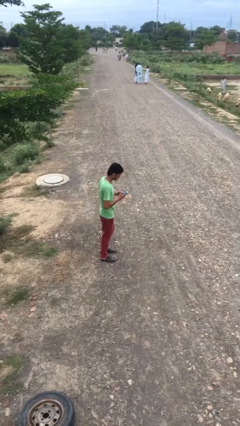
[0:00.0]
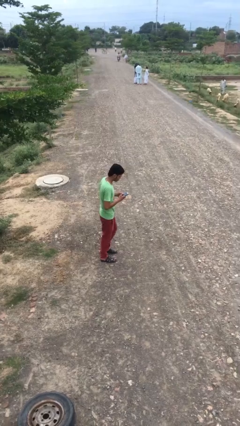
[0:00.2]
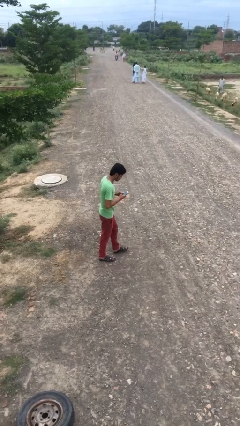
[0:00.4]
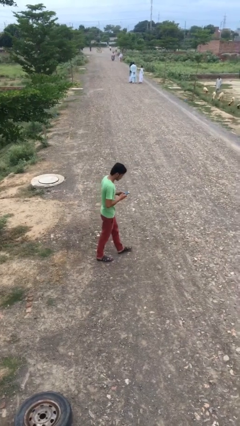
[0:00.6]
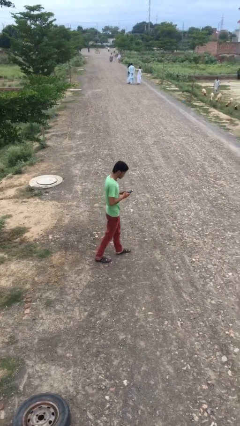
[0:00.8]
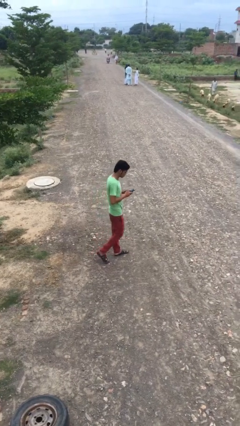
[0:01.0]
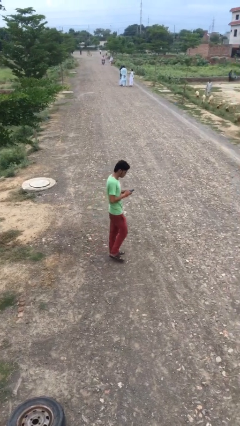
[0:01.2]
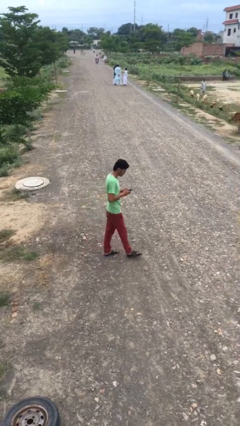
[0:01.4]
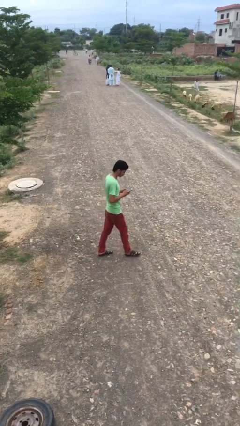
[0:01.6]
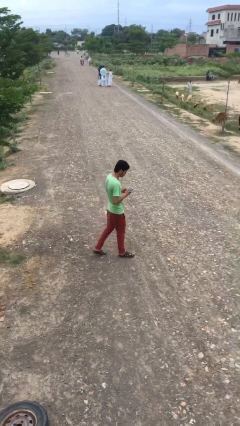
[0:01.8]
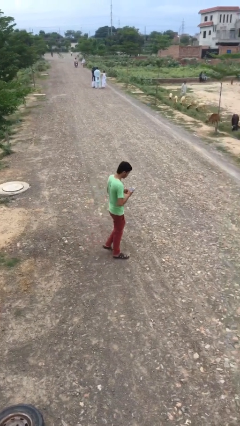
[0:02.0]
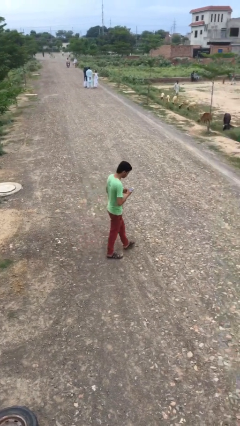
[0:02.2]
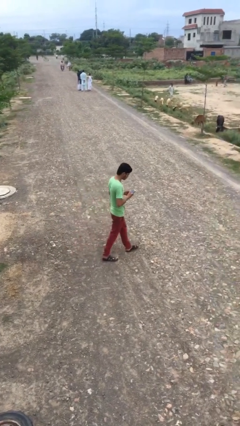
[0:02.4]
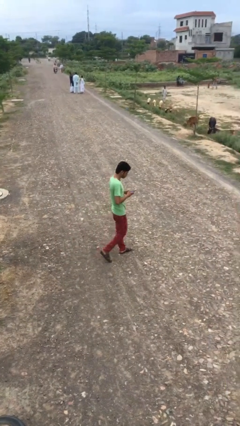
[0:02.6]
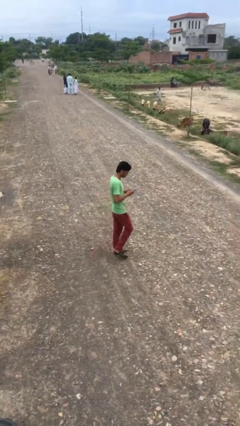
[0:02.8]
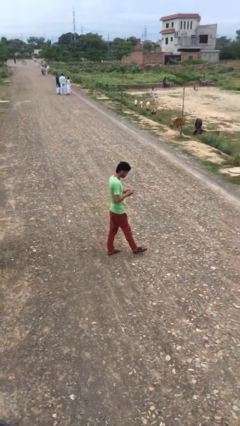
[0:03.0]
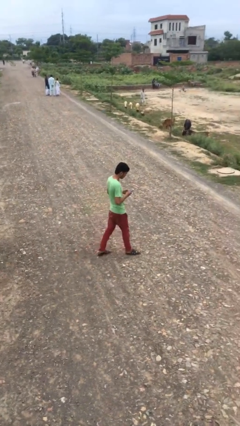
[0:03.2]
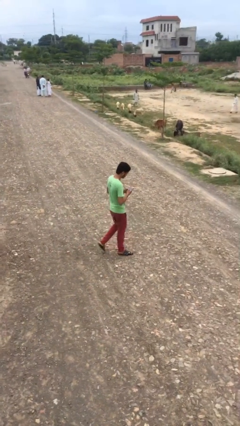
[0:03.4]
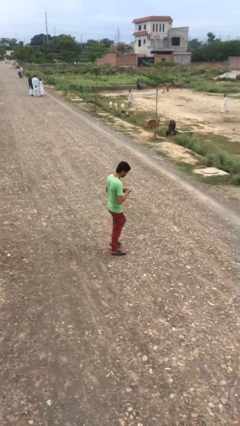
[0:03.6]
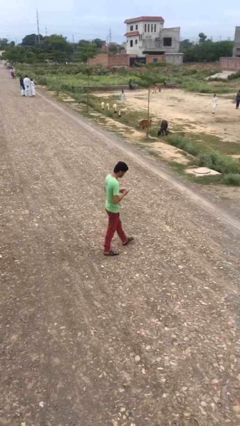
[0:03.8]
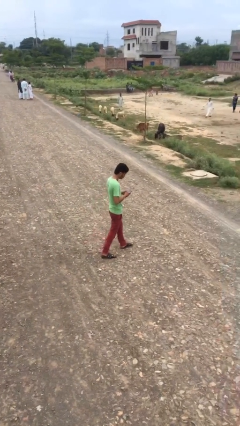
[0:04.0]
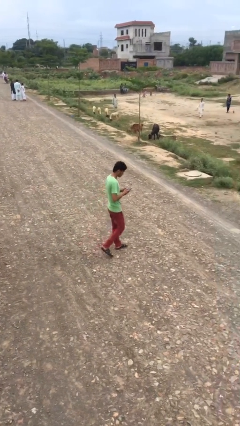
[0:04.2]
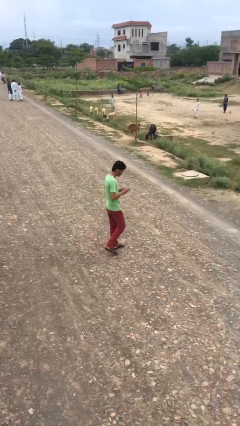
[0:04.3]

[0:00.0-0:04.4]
person texts on phone

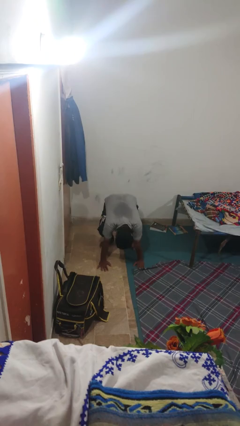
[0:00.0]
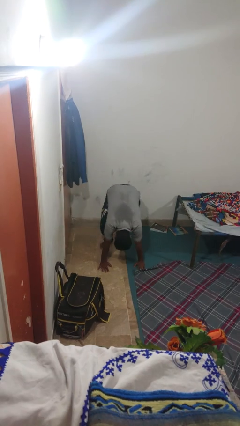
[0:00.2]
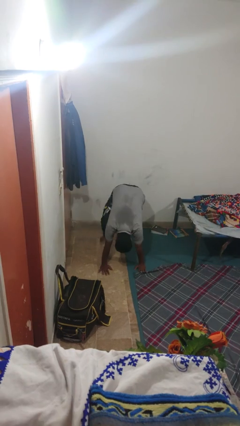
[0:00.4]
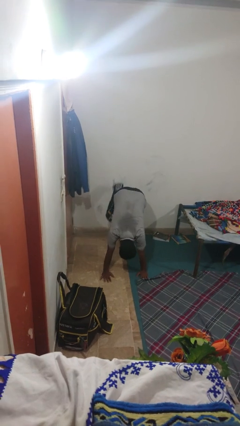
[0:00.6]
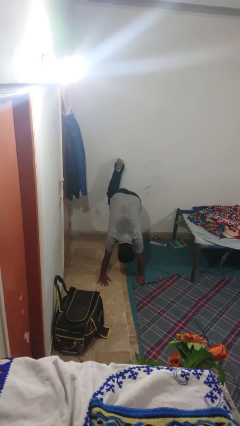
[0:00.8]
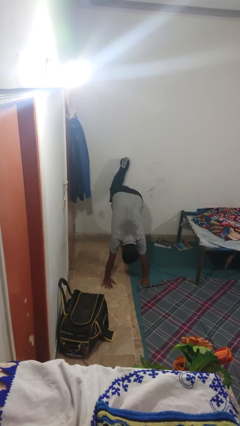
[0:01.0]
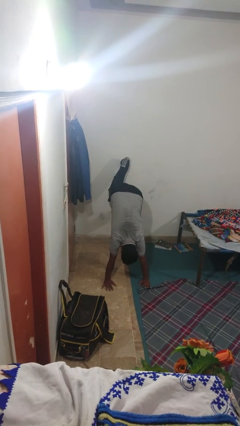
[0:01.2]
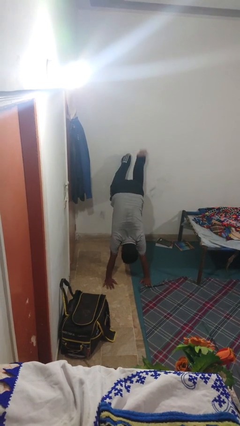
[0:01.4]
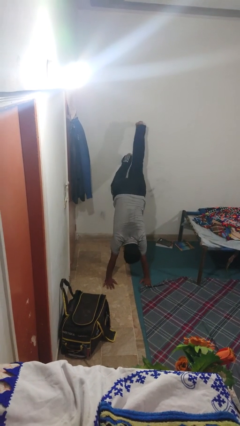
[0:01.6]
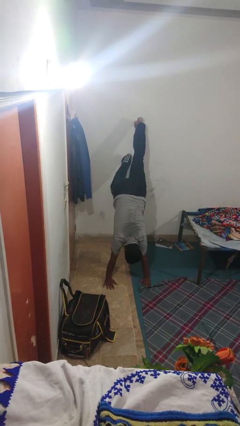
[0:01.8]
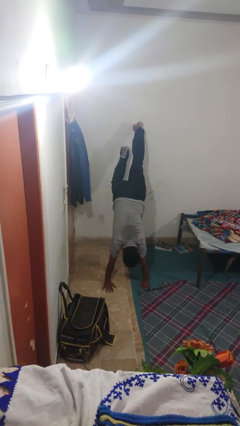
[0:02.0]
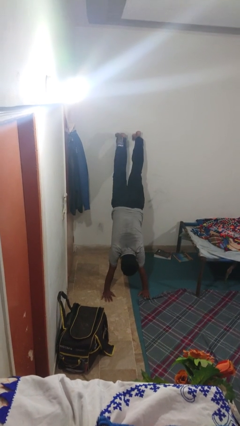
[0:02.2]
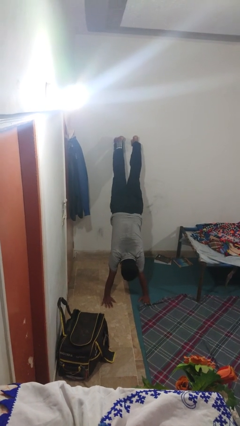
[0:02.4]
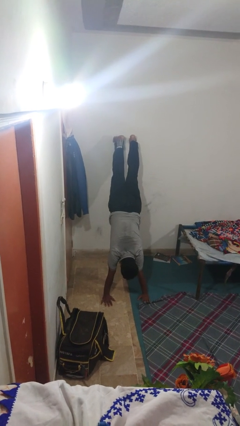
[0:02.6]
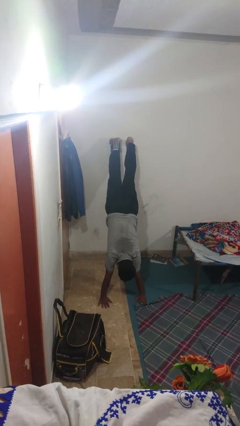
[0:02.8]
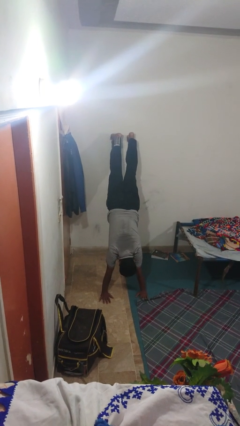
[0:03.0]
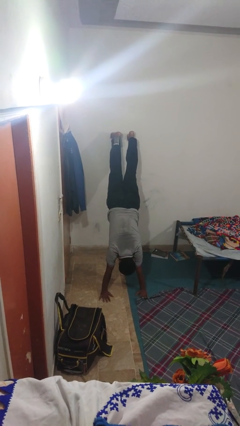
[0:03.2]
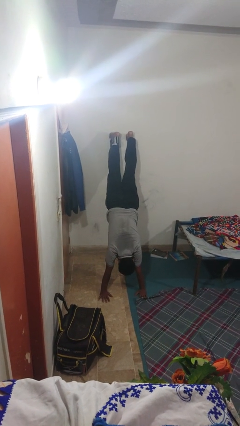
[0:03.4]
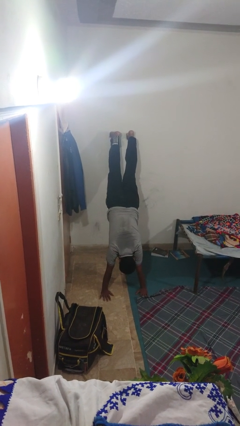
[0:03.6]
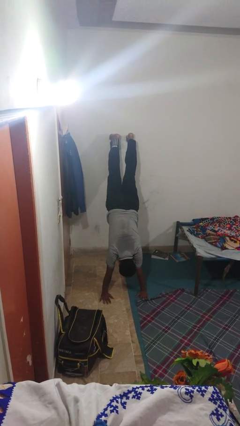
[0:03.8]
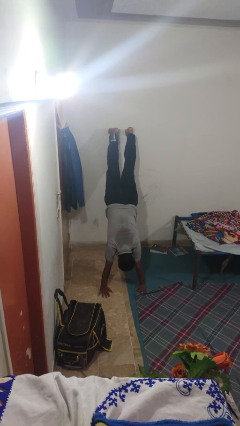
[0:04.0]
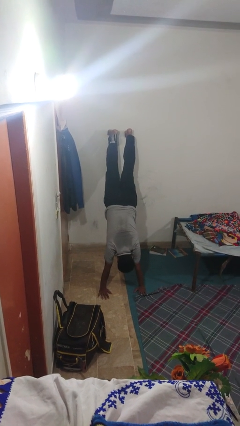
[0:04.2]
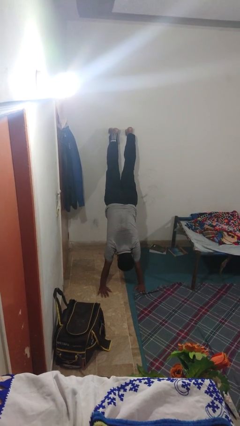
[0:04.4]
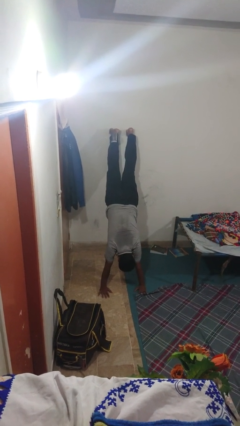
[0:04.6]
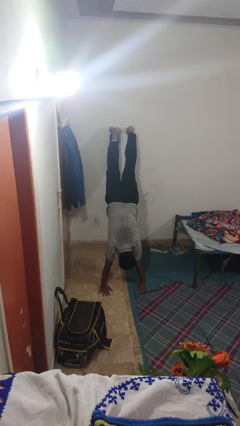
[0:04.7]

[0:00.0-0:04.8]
person handstand

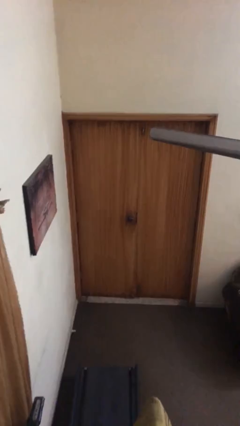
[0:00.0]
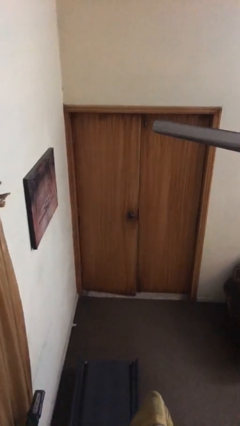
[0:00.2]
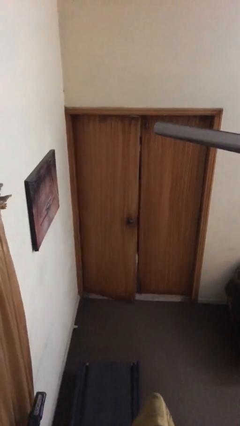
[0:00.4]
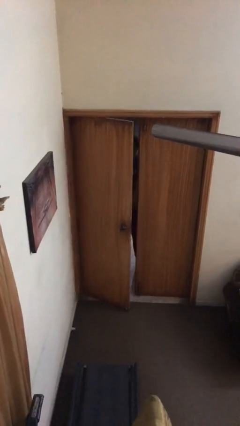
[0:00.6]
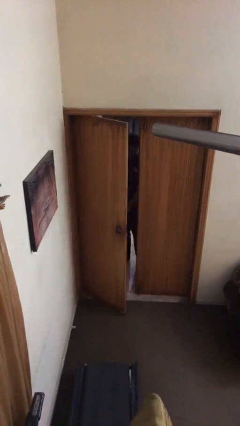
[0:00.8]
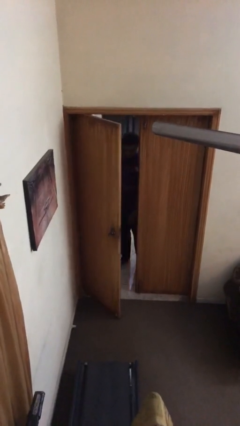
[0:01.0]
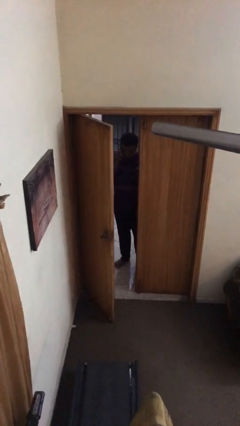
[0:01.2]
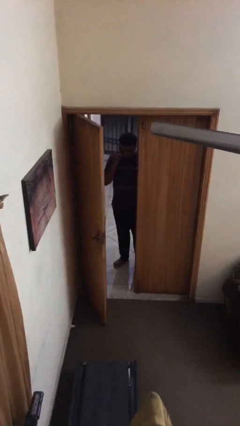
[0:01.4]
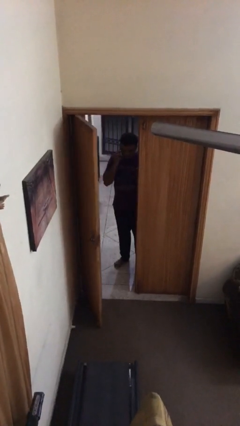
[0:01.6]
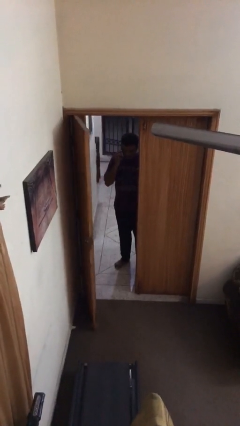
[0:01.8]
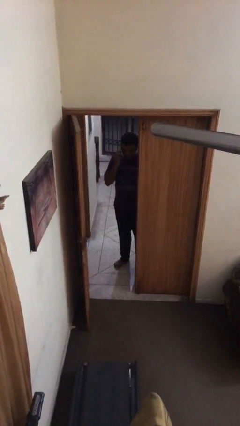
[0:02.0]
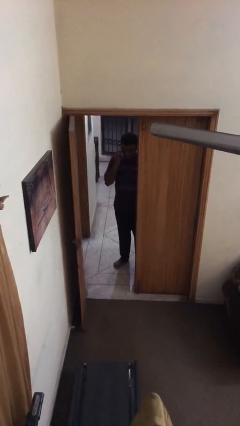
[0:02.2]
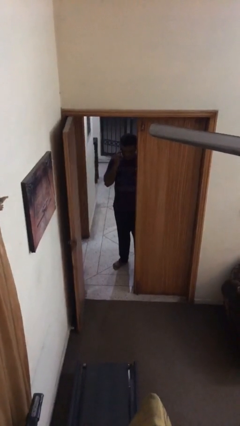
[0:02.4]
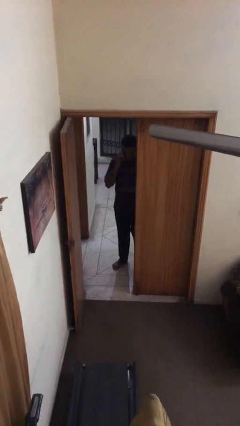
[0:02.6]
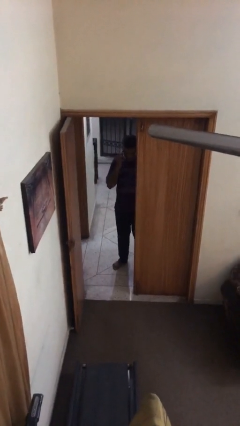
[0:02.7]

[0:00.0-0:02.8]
person opens facility door

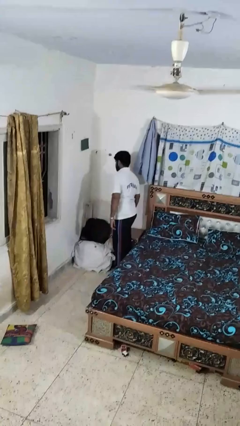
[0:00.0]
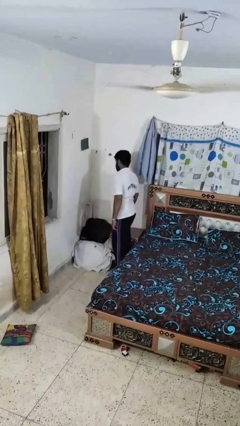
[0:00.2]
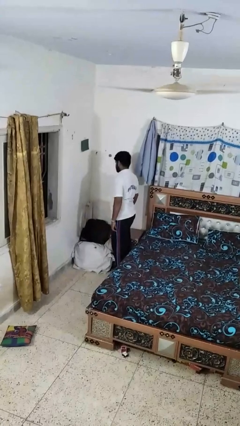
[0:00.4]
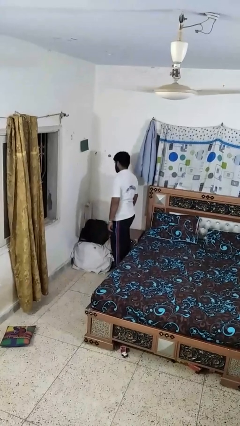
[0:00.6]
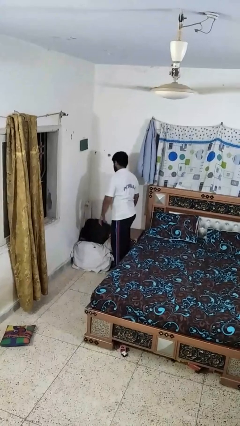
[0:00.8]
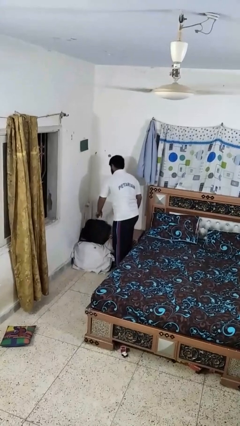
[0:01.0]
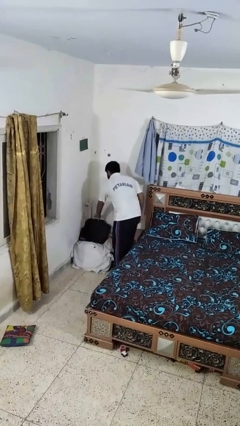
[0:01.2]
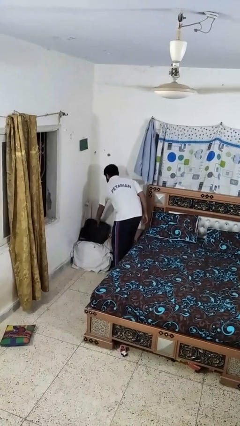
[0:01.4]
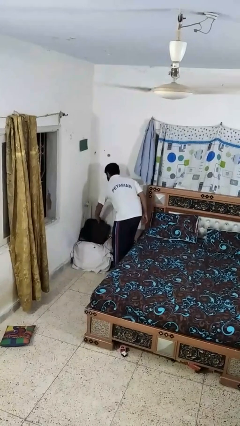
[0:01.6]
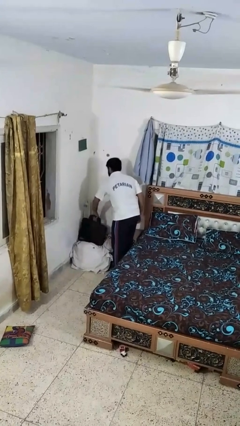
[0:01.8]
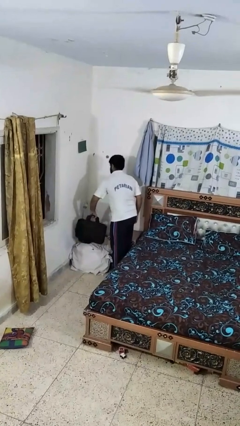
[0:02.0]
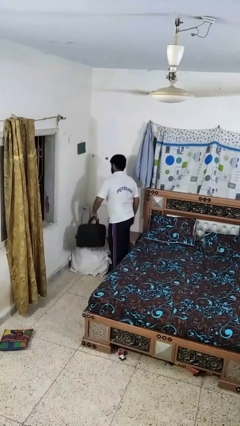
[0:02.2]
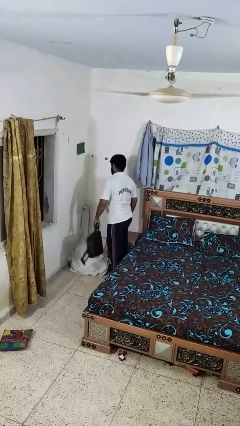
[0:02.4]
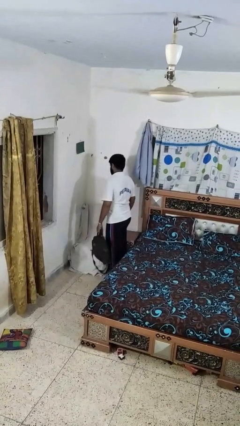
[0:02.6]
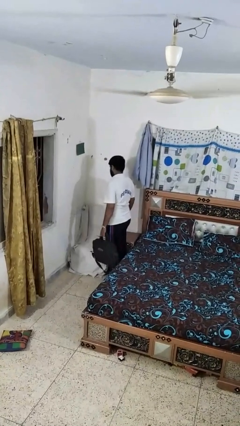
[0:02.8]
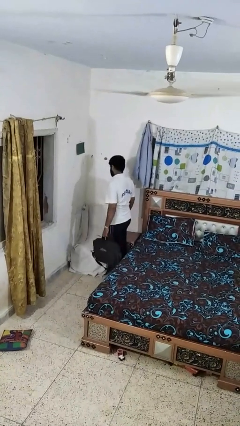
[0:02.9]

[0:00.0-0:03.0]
person picks up object from couch

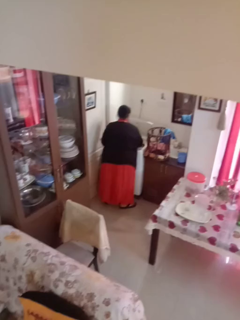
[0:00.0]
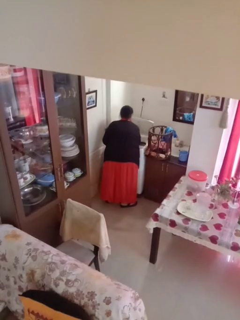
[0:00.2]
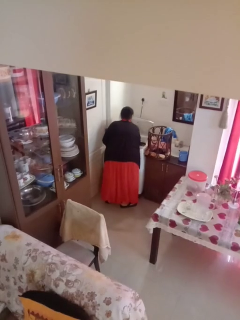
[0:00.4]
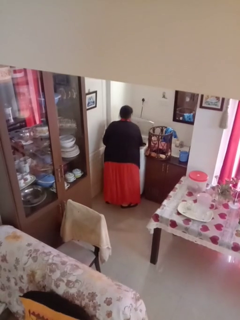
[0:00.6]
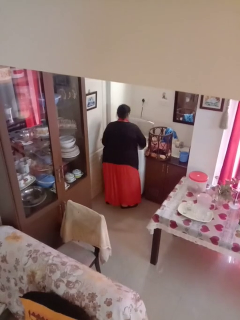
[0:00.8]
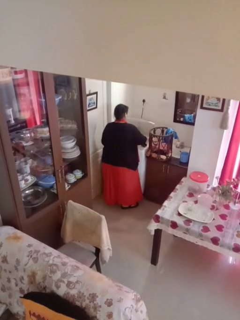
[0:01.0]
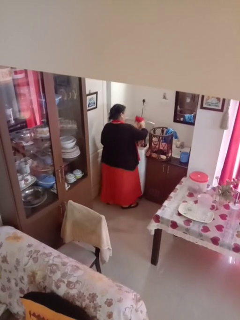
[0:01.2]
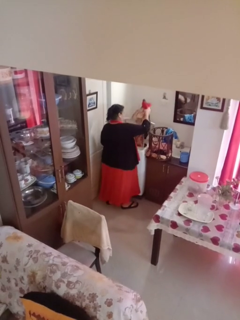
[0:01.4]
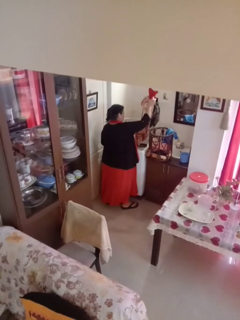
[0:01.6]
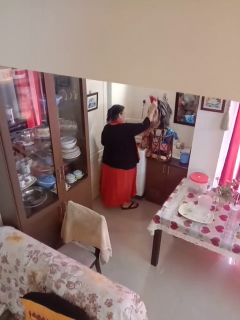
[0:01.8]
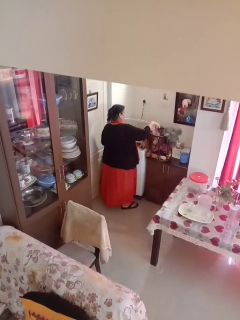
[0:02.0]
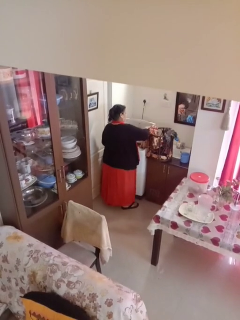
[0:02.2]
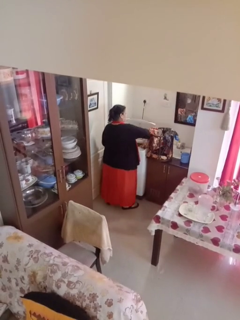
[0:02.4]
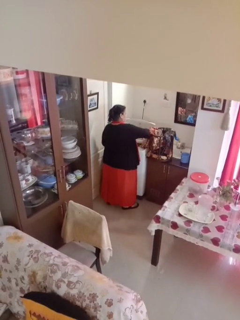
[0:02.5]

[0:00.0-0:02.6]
person loads clotheswasher

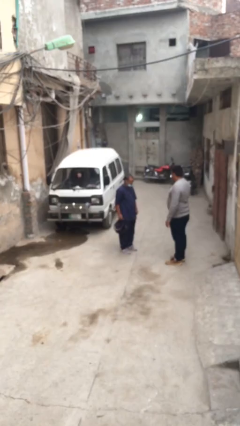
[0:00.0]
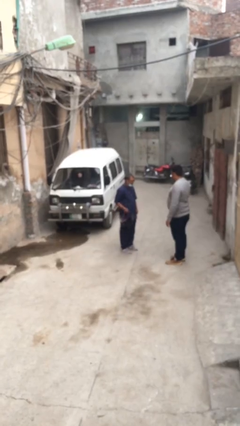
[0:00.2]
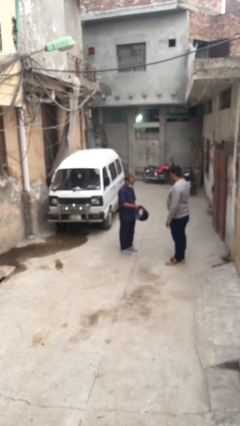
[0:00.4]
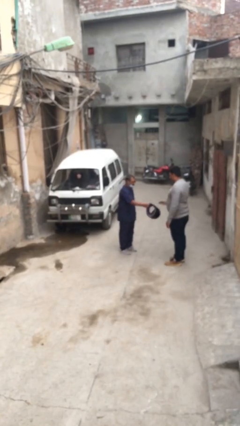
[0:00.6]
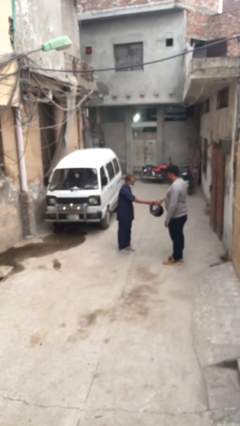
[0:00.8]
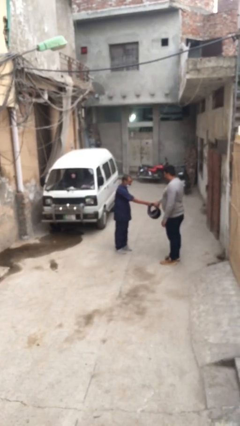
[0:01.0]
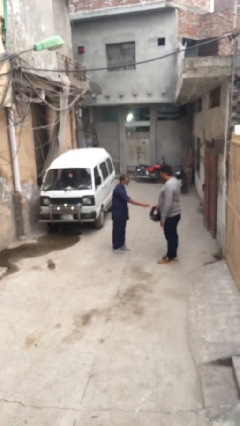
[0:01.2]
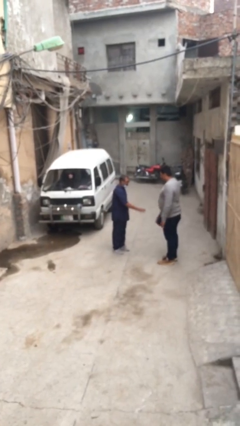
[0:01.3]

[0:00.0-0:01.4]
person transfers object to person
